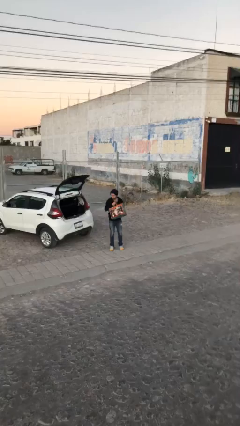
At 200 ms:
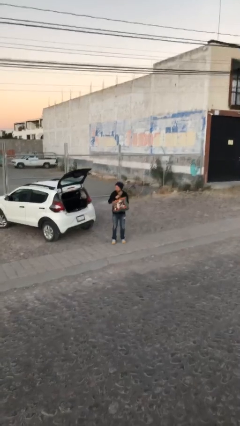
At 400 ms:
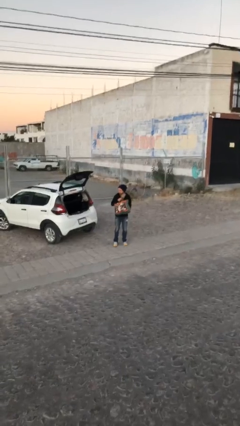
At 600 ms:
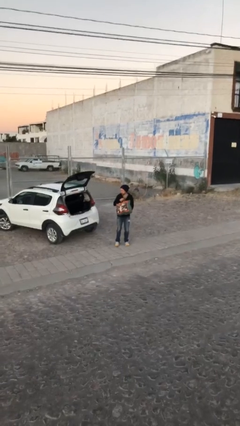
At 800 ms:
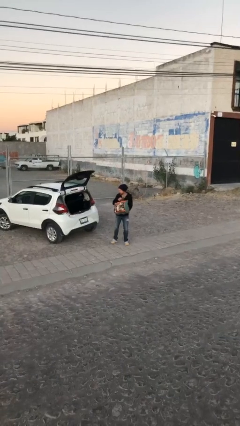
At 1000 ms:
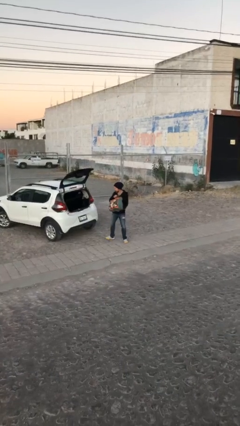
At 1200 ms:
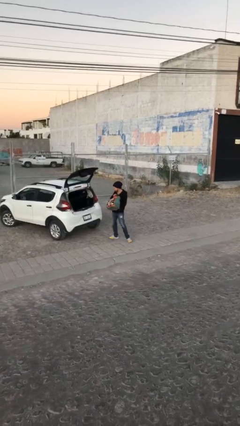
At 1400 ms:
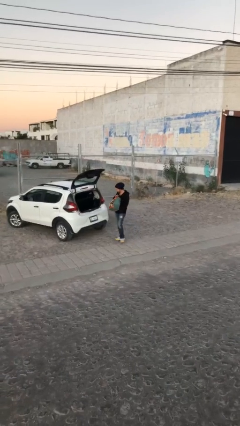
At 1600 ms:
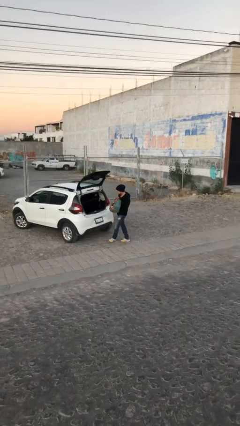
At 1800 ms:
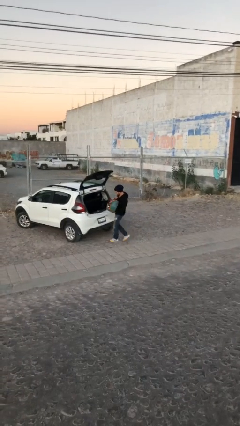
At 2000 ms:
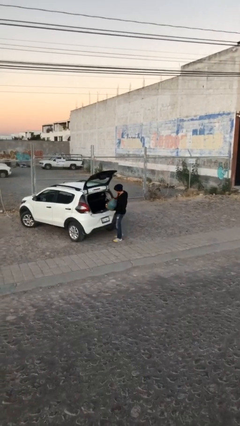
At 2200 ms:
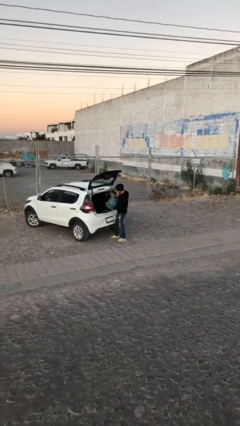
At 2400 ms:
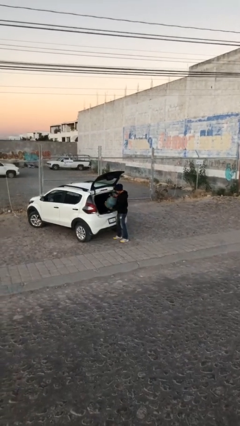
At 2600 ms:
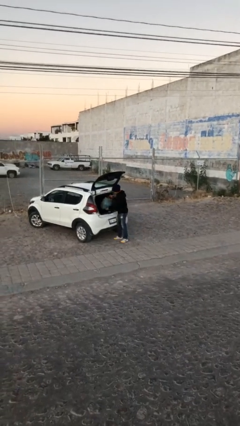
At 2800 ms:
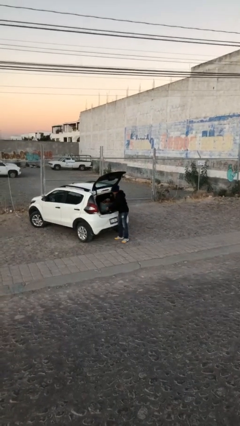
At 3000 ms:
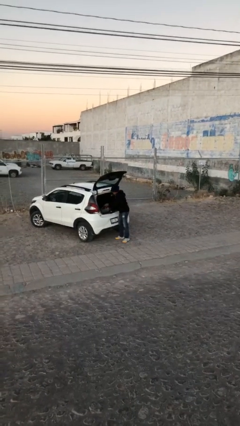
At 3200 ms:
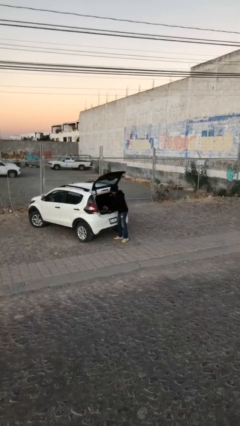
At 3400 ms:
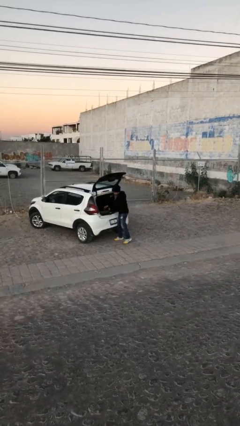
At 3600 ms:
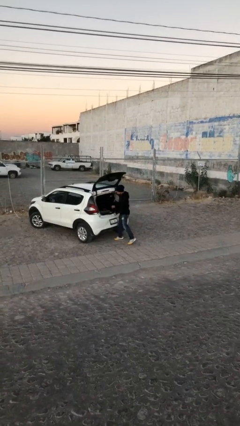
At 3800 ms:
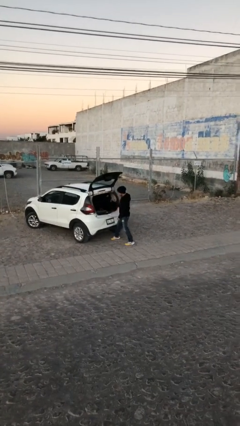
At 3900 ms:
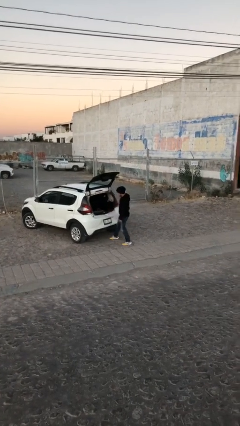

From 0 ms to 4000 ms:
person loads car

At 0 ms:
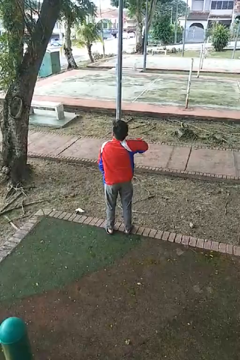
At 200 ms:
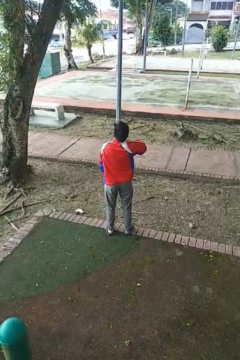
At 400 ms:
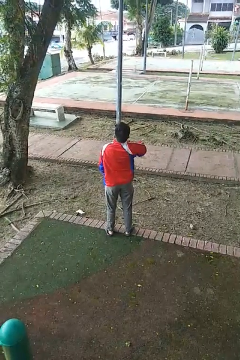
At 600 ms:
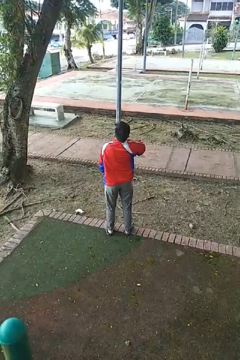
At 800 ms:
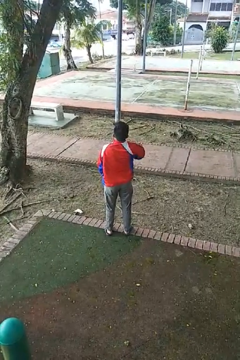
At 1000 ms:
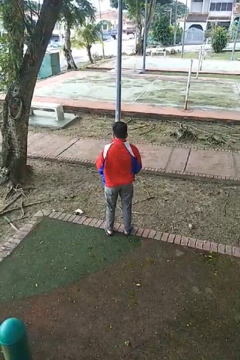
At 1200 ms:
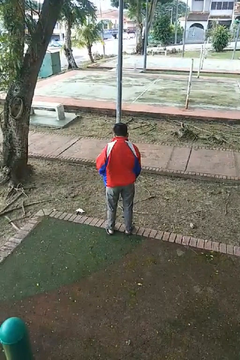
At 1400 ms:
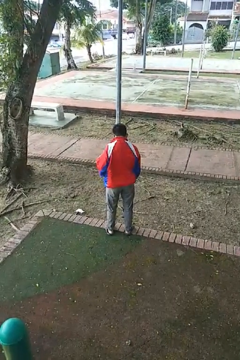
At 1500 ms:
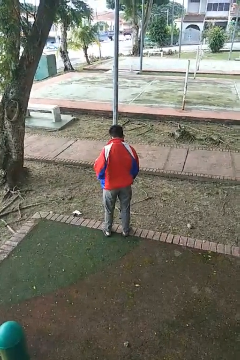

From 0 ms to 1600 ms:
person unzips jacket

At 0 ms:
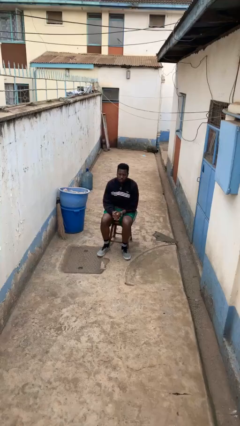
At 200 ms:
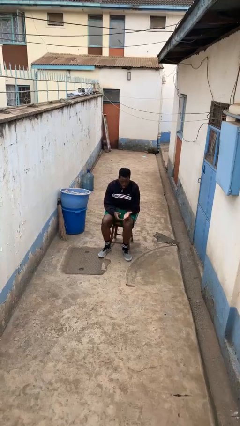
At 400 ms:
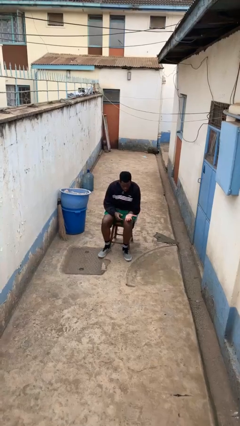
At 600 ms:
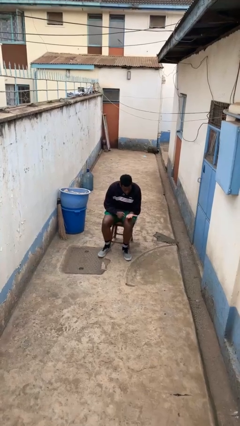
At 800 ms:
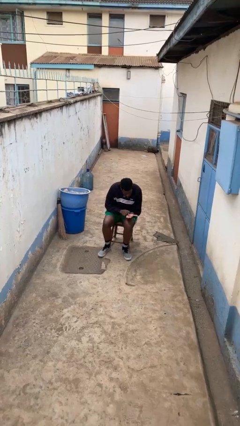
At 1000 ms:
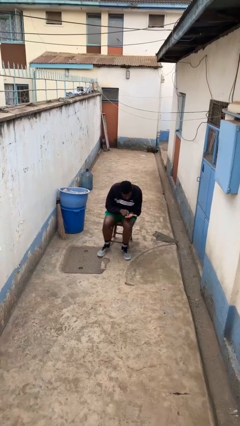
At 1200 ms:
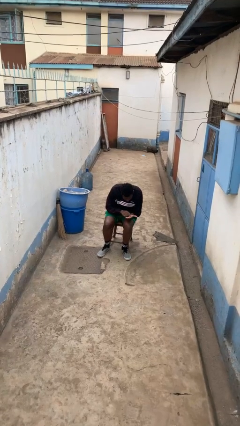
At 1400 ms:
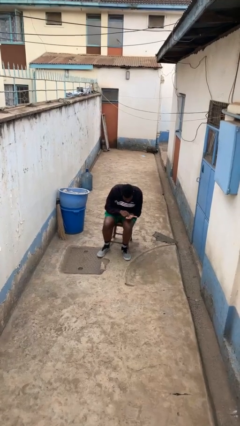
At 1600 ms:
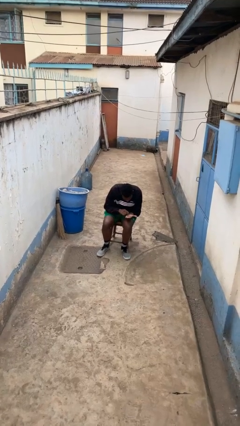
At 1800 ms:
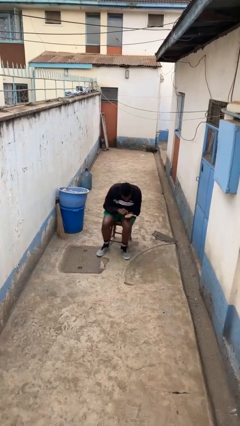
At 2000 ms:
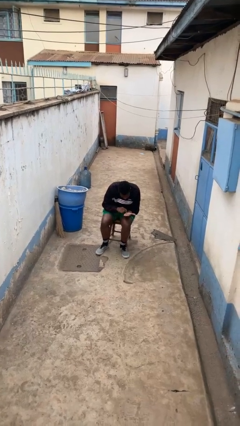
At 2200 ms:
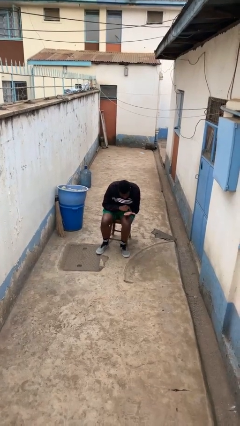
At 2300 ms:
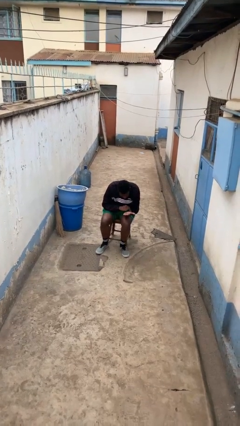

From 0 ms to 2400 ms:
person looks at hands in lap

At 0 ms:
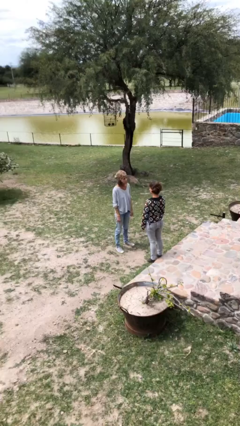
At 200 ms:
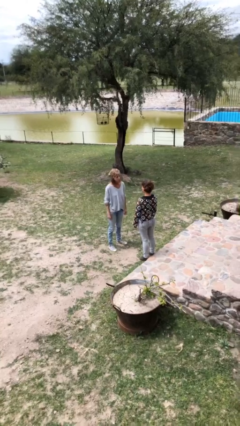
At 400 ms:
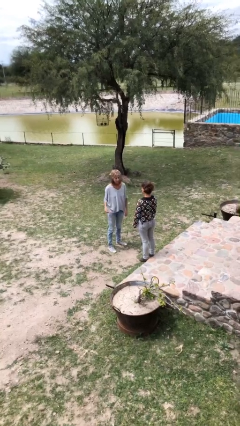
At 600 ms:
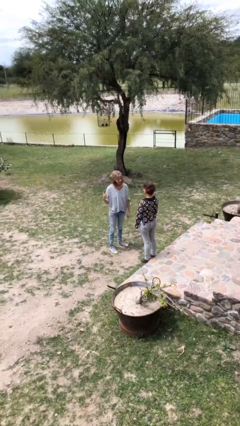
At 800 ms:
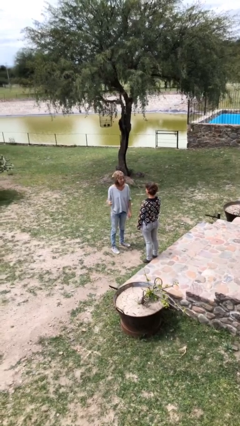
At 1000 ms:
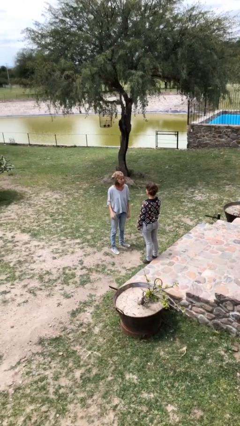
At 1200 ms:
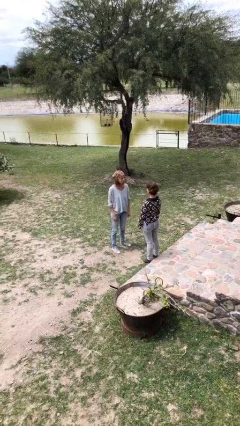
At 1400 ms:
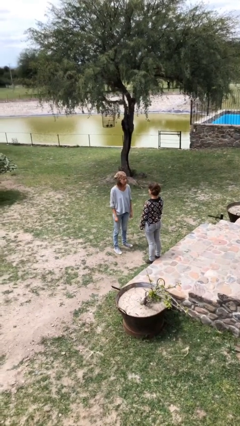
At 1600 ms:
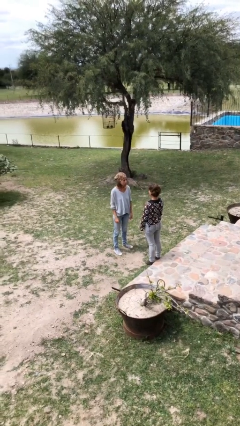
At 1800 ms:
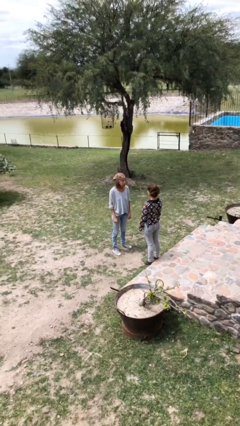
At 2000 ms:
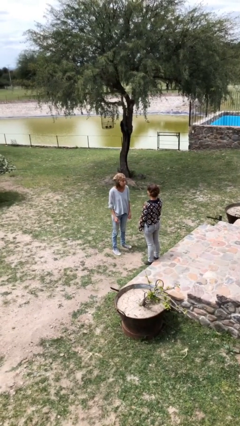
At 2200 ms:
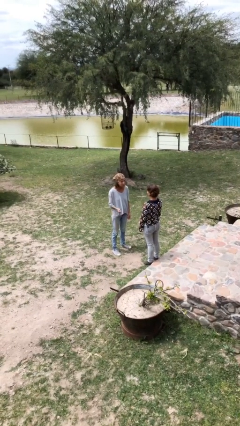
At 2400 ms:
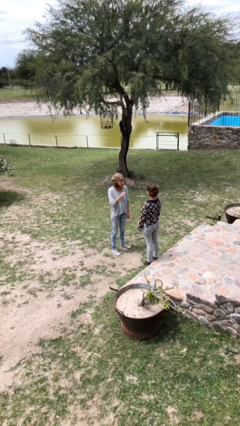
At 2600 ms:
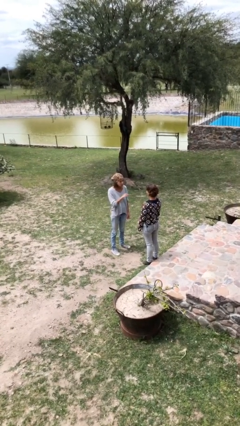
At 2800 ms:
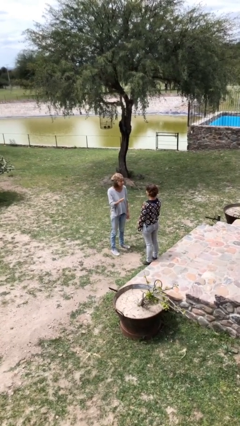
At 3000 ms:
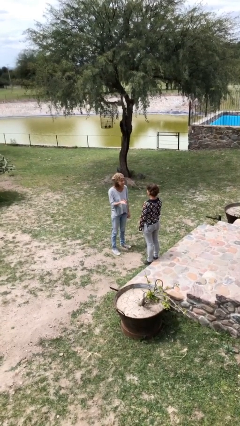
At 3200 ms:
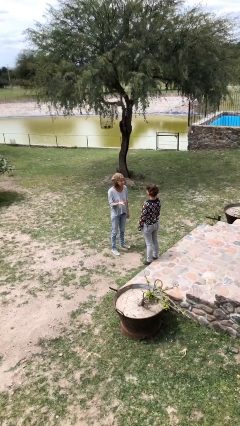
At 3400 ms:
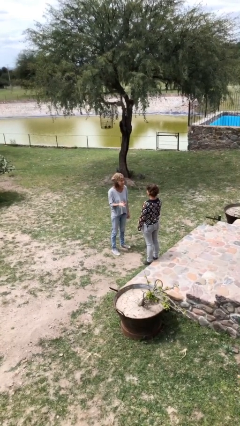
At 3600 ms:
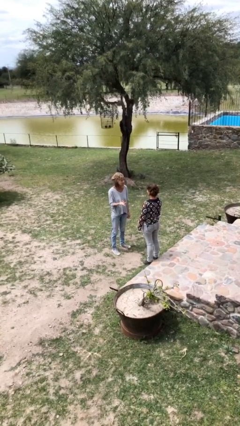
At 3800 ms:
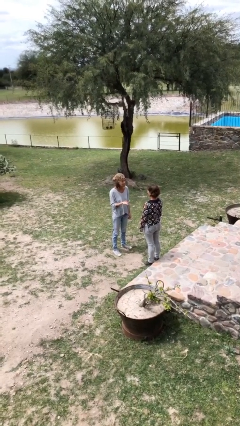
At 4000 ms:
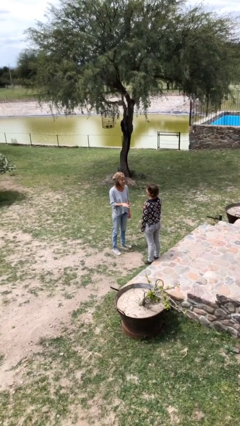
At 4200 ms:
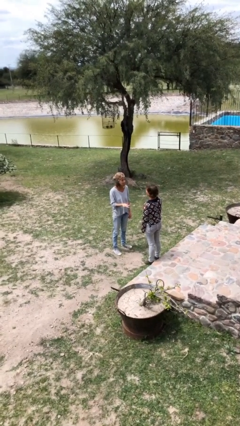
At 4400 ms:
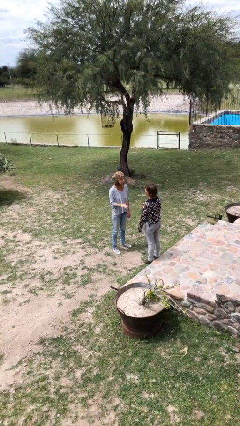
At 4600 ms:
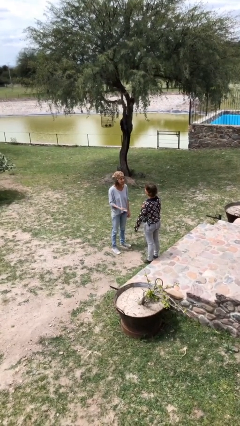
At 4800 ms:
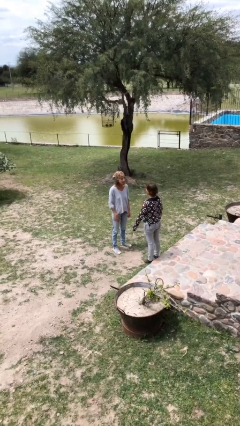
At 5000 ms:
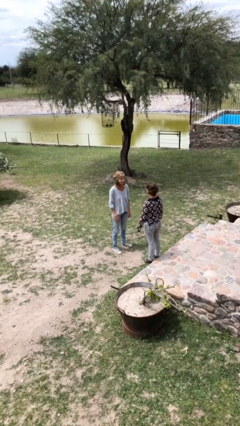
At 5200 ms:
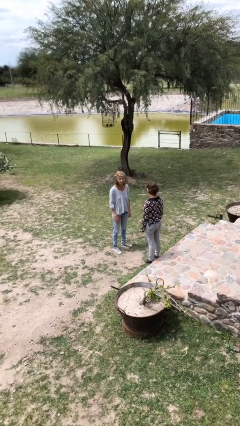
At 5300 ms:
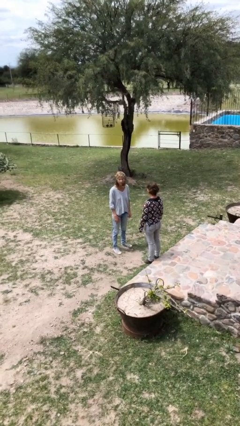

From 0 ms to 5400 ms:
person talks to person

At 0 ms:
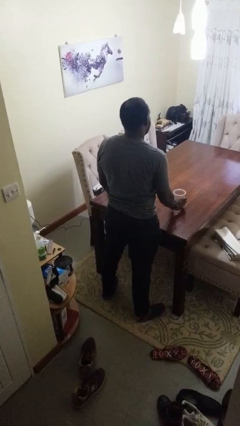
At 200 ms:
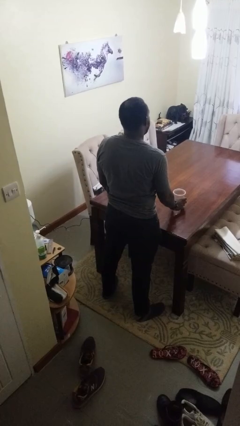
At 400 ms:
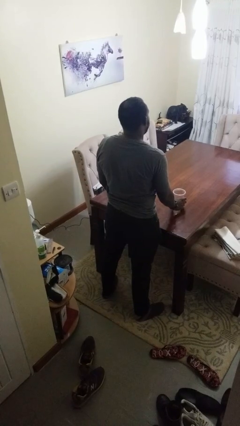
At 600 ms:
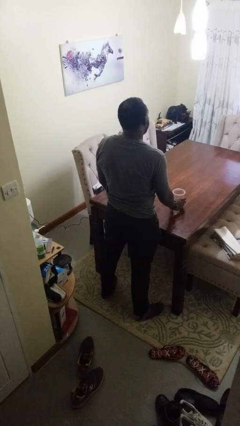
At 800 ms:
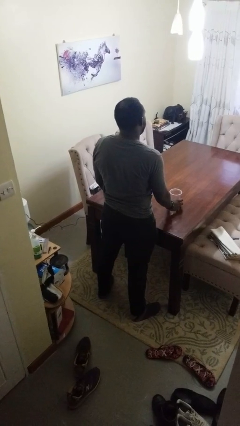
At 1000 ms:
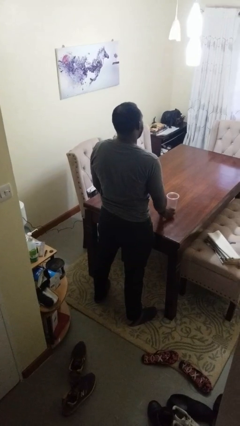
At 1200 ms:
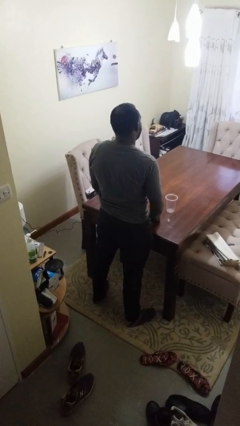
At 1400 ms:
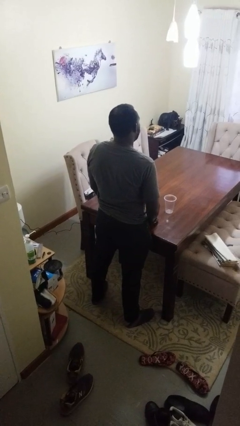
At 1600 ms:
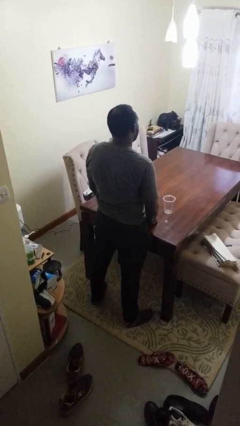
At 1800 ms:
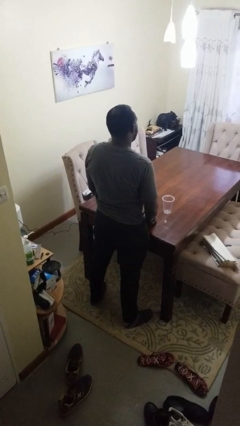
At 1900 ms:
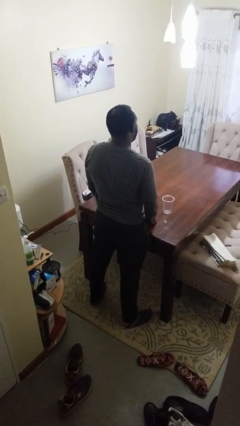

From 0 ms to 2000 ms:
person sets upright glass

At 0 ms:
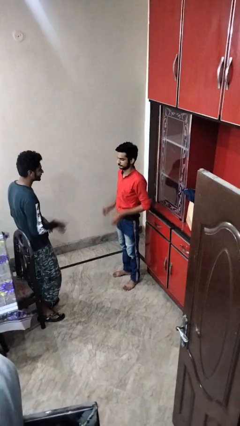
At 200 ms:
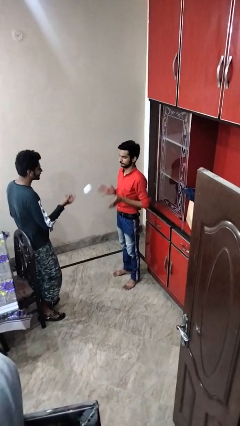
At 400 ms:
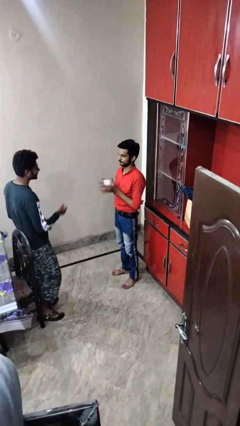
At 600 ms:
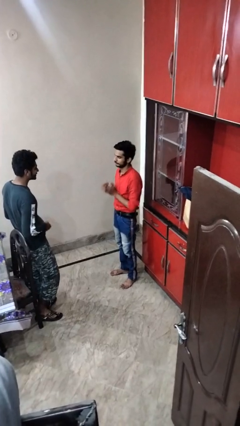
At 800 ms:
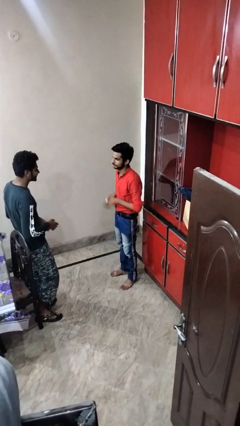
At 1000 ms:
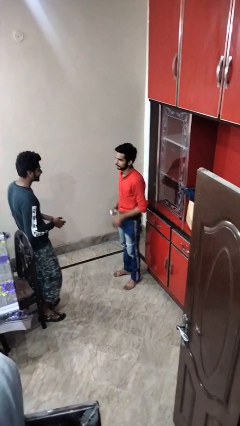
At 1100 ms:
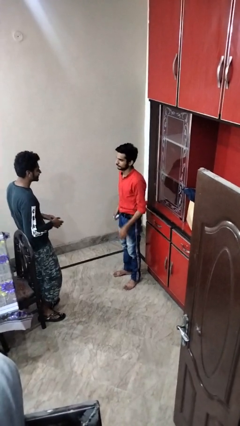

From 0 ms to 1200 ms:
person catches object from person

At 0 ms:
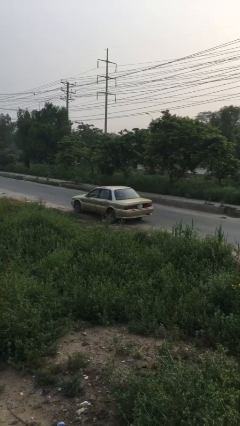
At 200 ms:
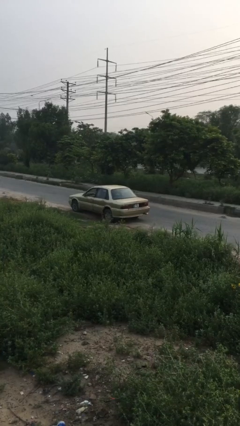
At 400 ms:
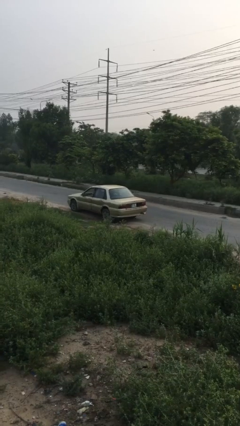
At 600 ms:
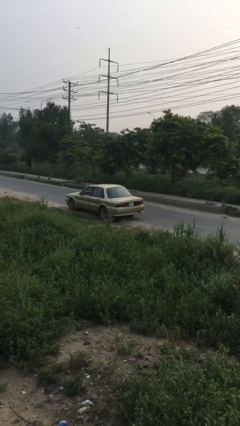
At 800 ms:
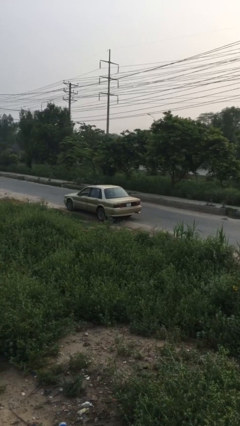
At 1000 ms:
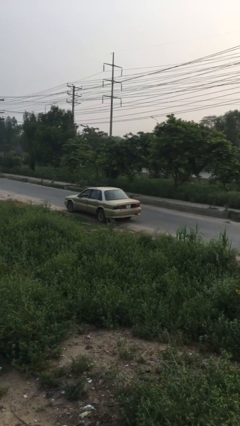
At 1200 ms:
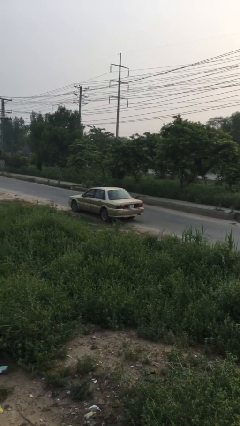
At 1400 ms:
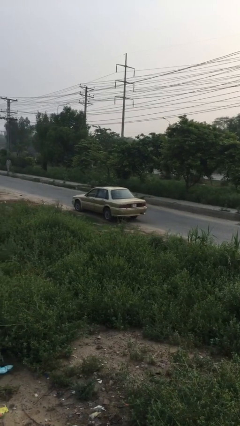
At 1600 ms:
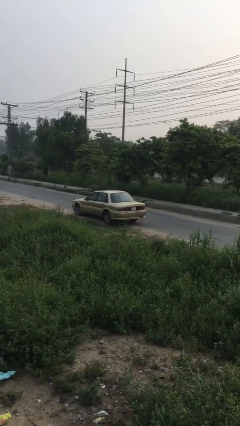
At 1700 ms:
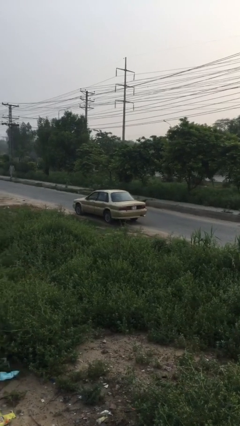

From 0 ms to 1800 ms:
car drops off person
